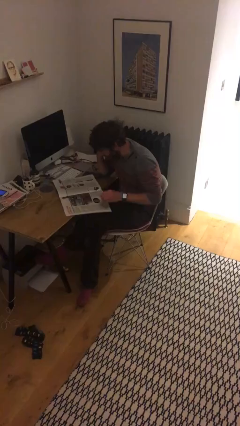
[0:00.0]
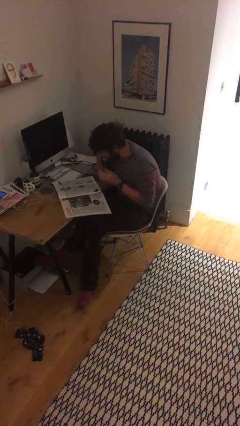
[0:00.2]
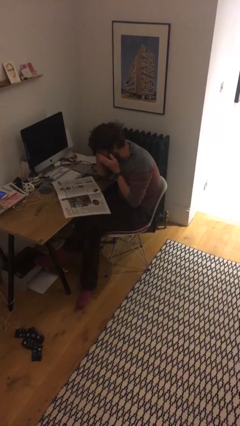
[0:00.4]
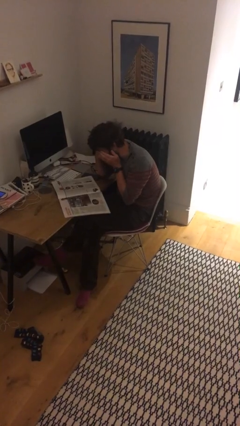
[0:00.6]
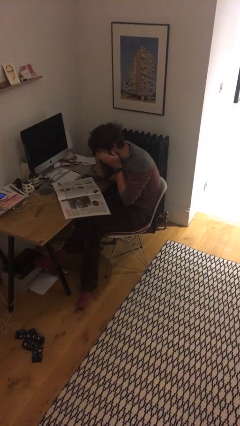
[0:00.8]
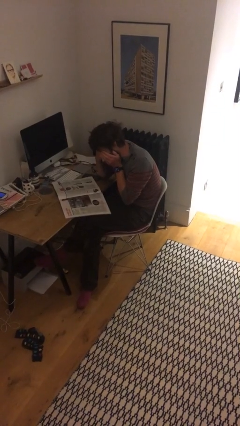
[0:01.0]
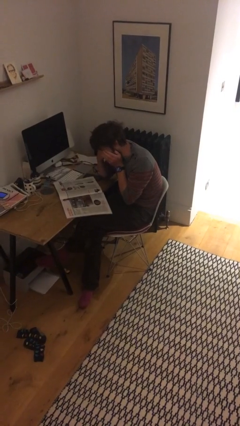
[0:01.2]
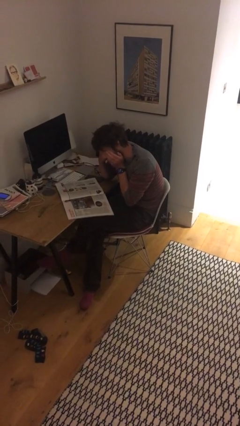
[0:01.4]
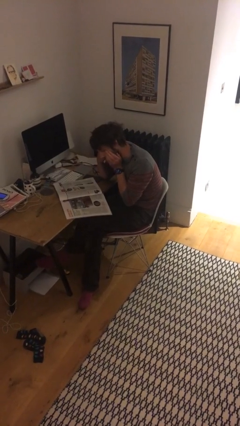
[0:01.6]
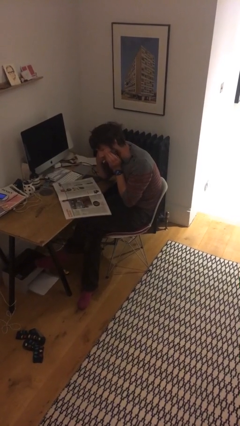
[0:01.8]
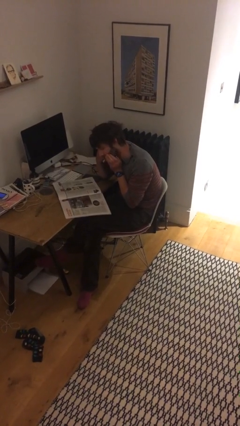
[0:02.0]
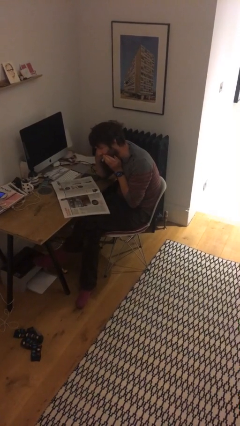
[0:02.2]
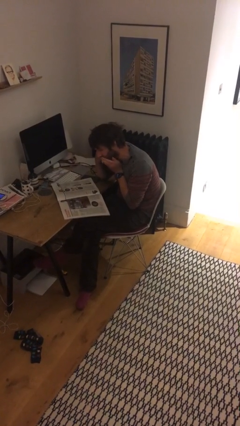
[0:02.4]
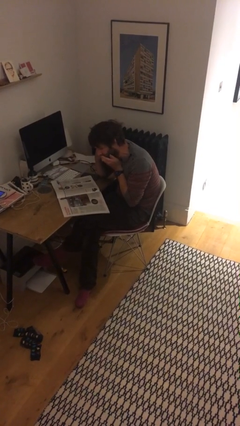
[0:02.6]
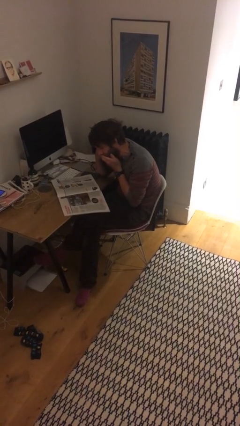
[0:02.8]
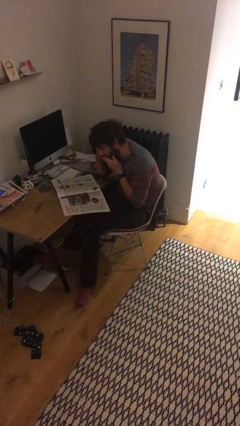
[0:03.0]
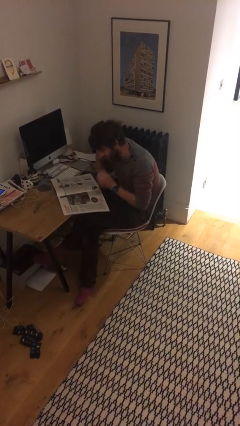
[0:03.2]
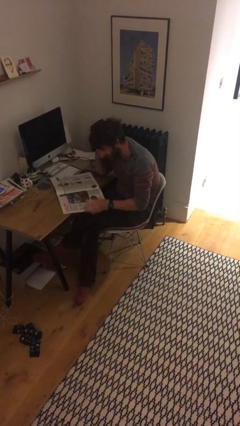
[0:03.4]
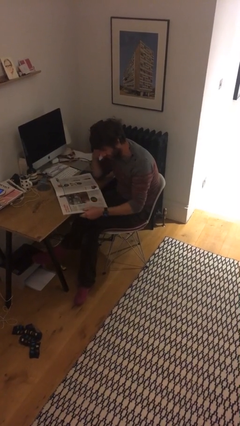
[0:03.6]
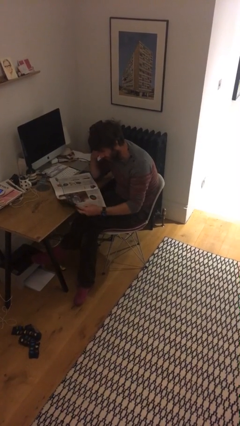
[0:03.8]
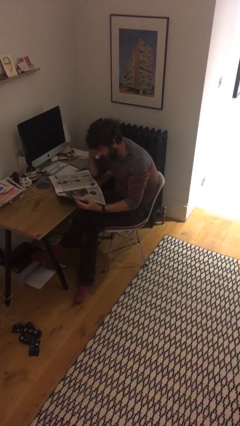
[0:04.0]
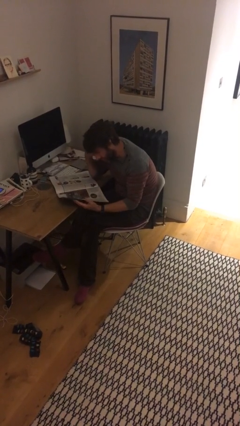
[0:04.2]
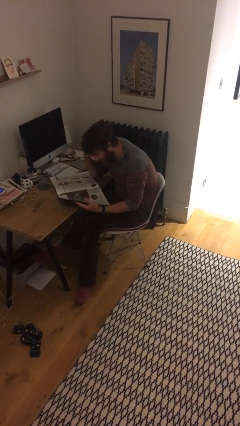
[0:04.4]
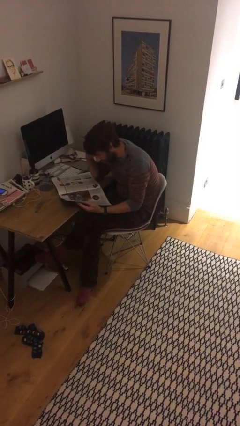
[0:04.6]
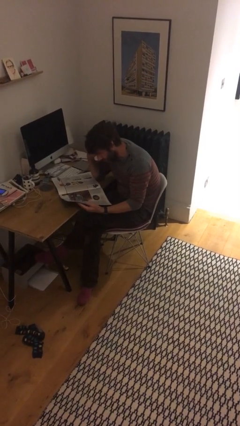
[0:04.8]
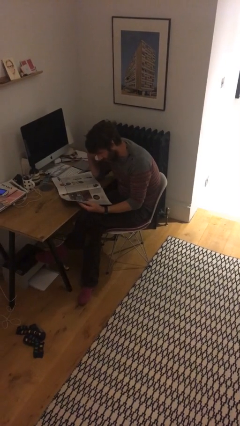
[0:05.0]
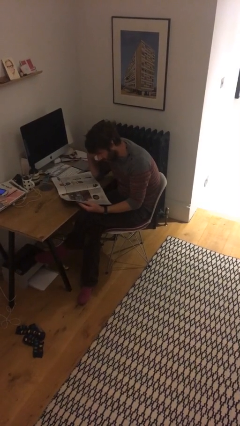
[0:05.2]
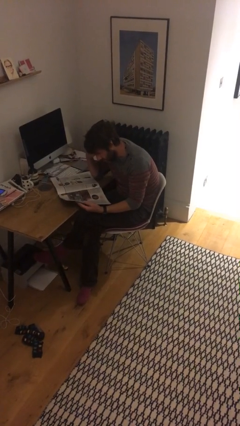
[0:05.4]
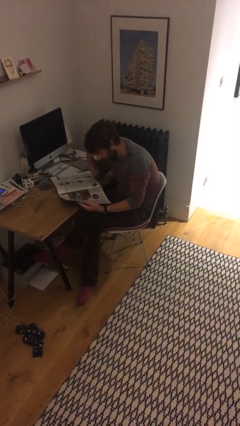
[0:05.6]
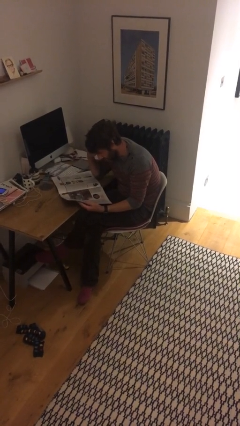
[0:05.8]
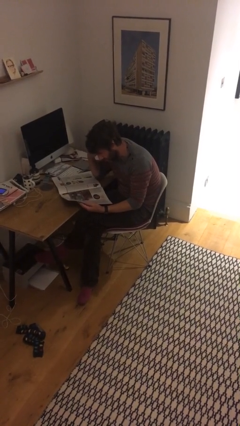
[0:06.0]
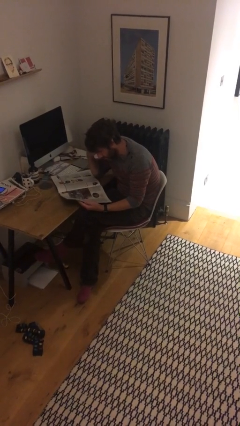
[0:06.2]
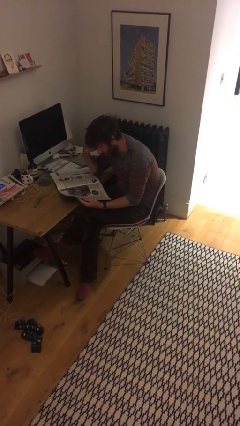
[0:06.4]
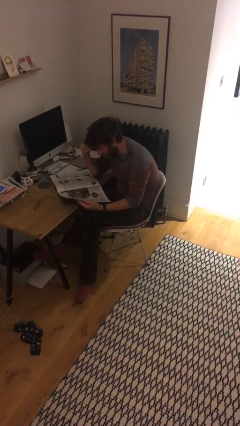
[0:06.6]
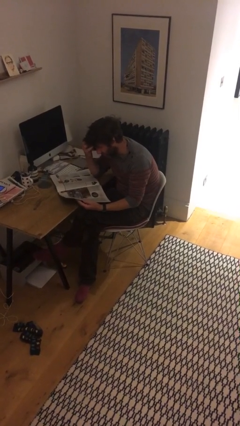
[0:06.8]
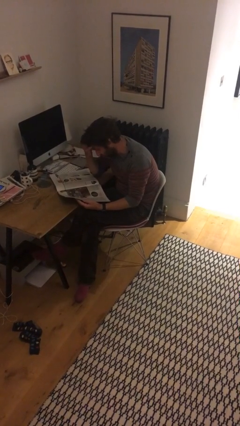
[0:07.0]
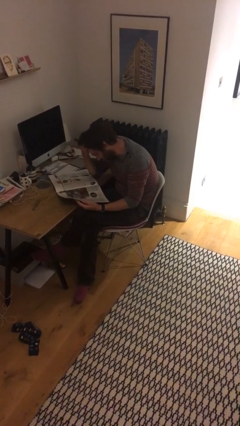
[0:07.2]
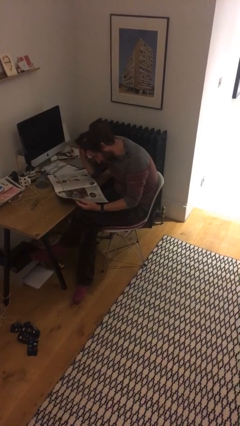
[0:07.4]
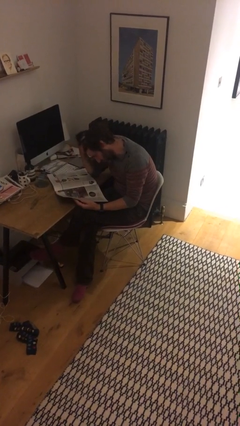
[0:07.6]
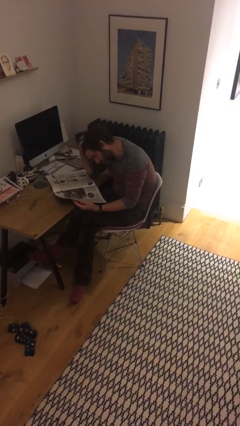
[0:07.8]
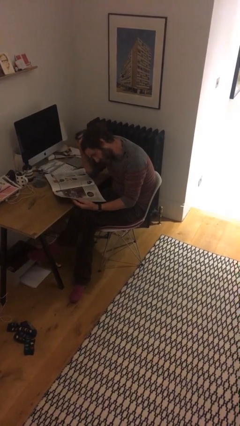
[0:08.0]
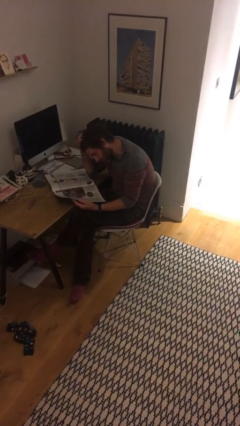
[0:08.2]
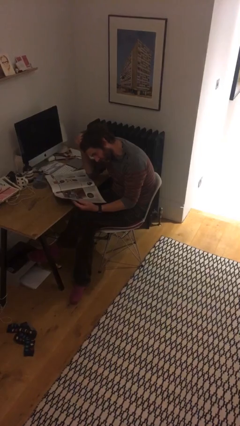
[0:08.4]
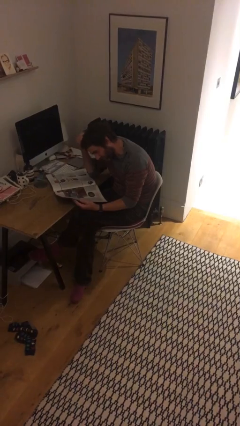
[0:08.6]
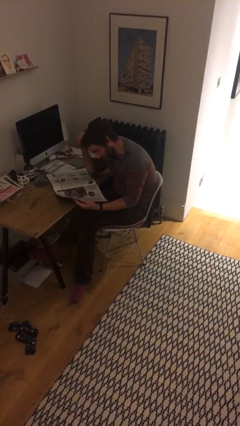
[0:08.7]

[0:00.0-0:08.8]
person reads document

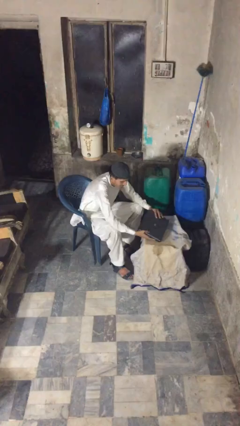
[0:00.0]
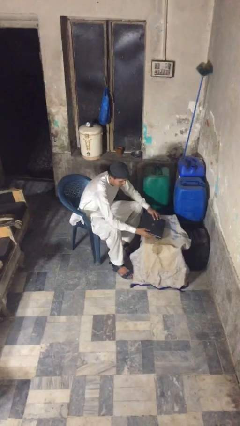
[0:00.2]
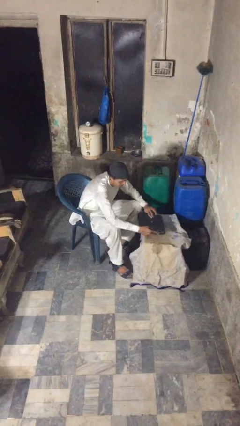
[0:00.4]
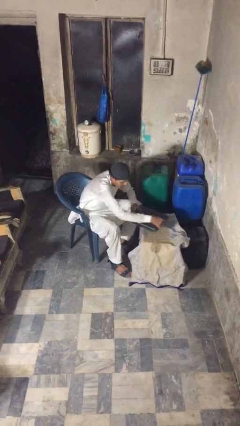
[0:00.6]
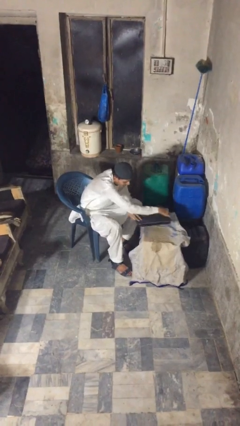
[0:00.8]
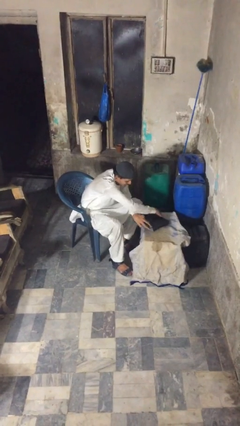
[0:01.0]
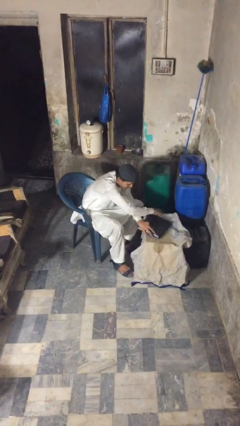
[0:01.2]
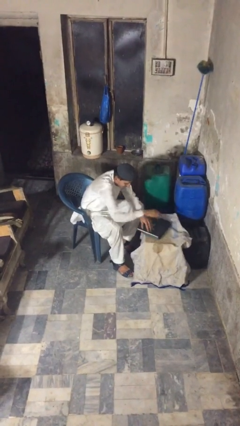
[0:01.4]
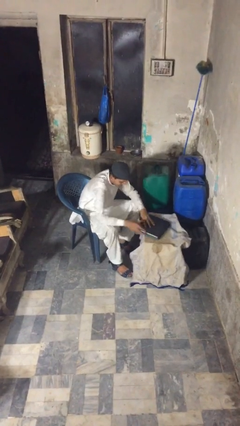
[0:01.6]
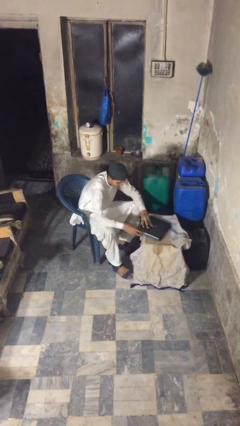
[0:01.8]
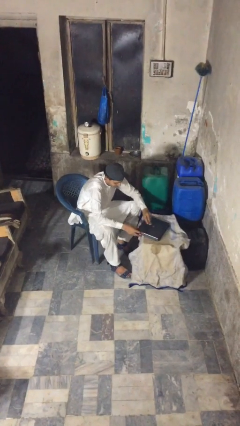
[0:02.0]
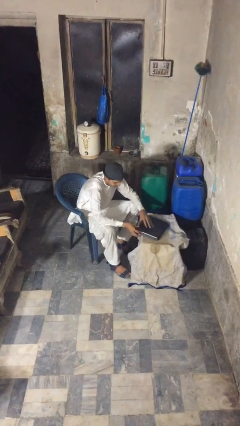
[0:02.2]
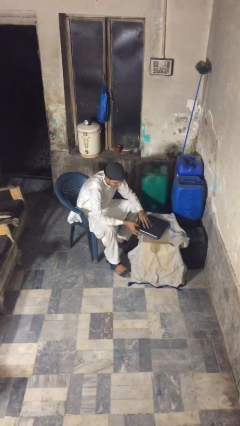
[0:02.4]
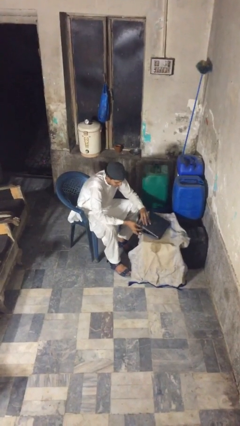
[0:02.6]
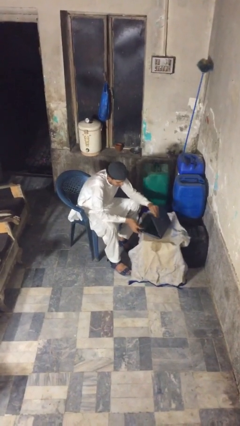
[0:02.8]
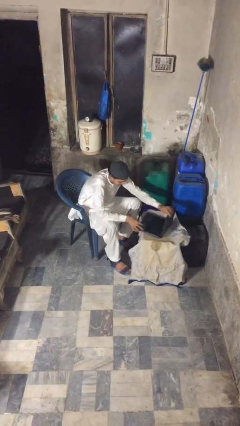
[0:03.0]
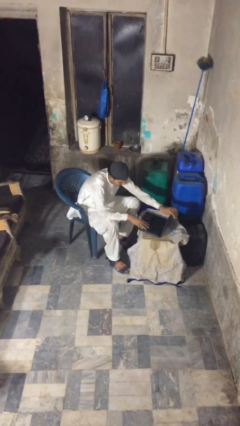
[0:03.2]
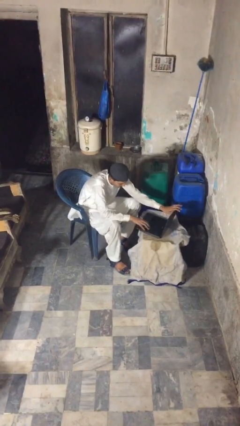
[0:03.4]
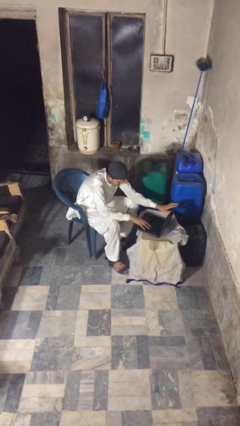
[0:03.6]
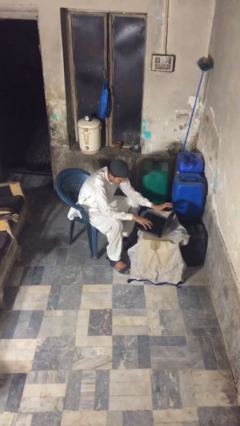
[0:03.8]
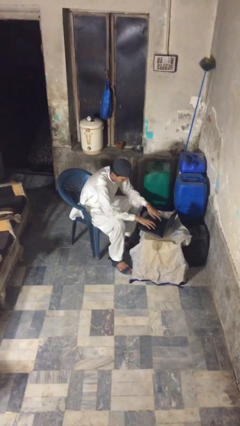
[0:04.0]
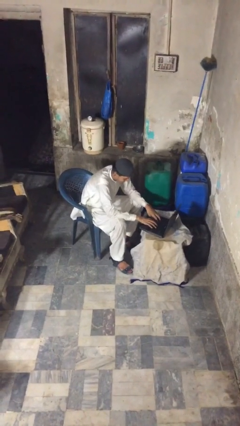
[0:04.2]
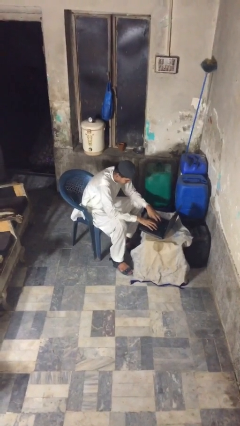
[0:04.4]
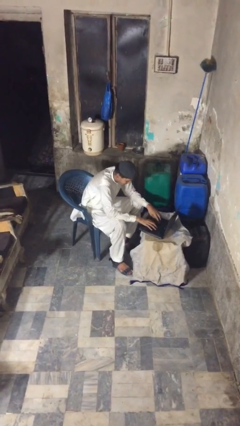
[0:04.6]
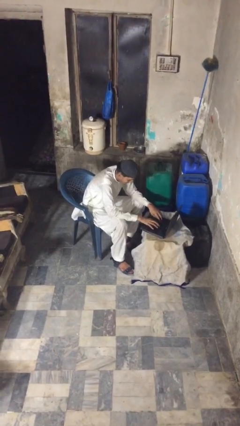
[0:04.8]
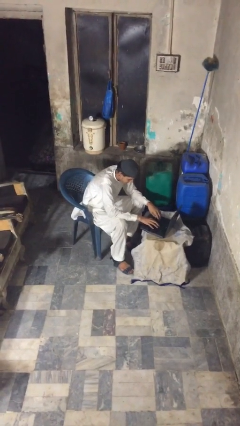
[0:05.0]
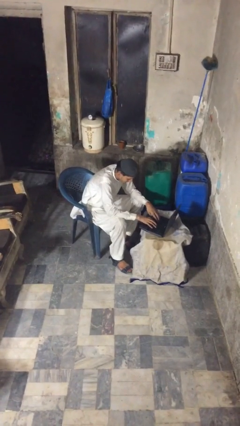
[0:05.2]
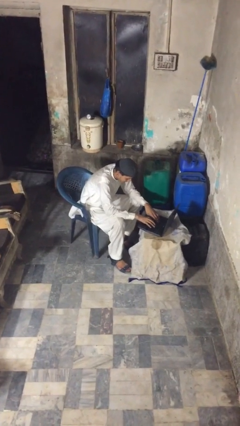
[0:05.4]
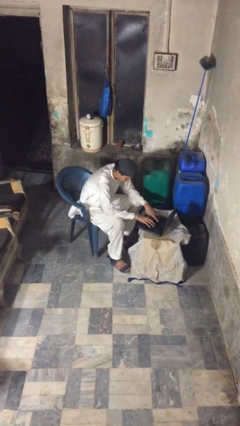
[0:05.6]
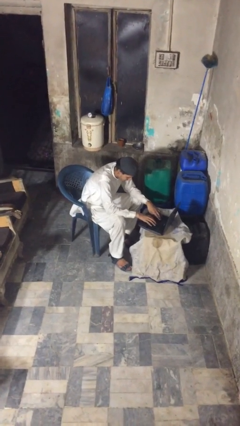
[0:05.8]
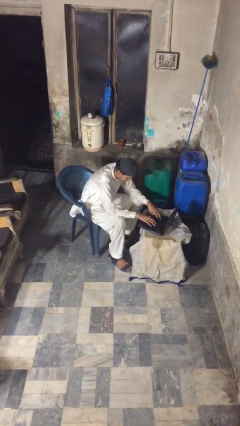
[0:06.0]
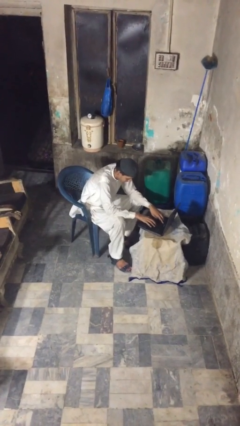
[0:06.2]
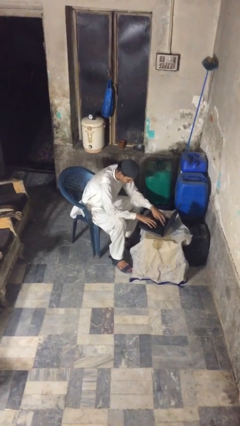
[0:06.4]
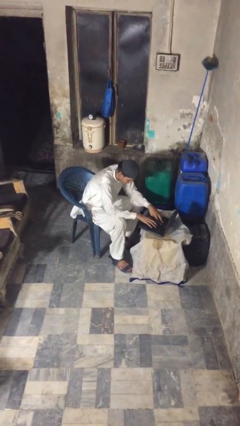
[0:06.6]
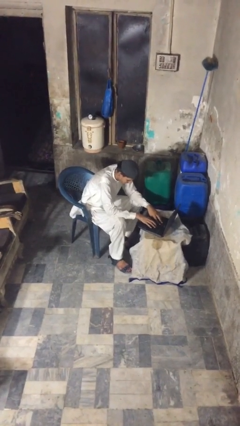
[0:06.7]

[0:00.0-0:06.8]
person interacts with laptop

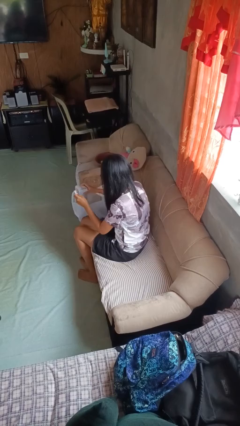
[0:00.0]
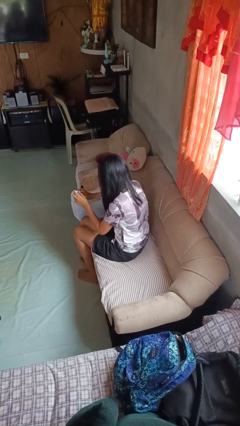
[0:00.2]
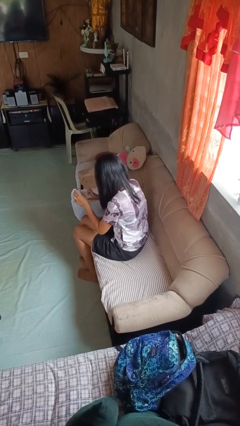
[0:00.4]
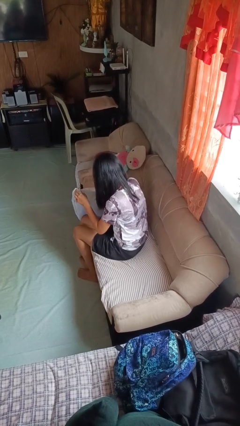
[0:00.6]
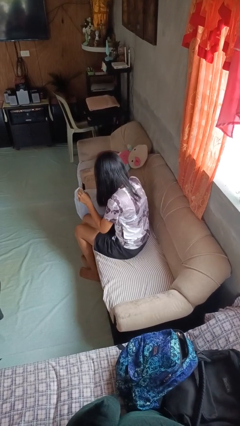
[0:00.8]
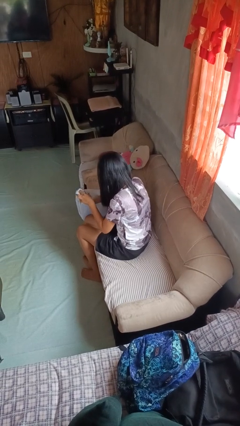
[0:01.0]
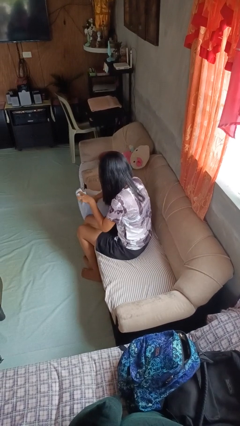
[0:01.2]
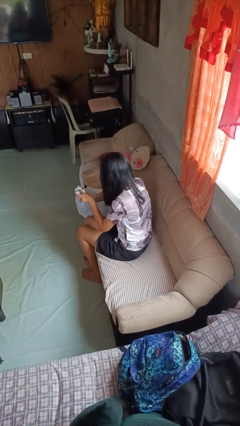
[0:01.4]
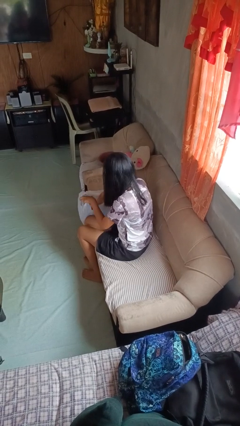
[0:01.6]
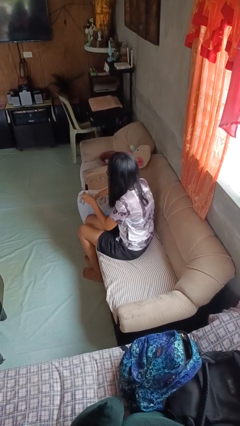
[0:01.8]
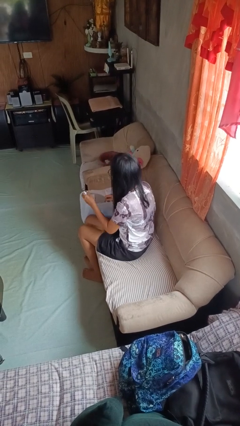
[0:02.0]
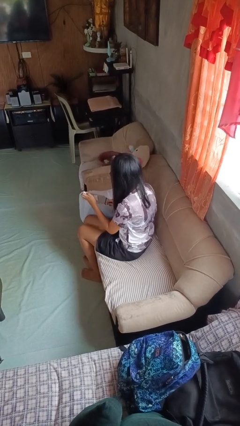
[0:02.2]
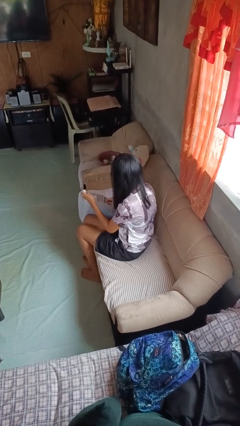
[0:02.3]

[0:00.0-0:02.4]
person searches in bag
